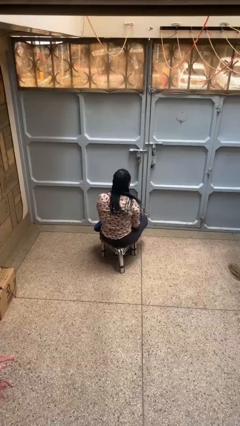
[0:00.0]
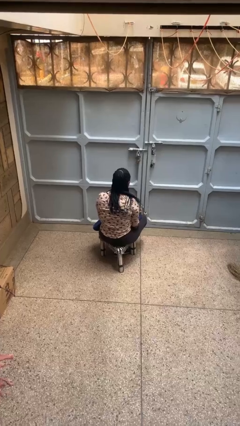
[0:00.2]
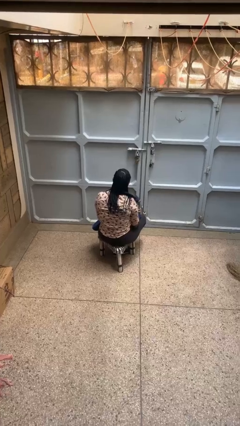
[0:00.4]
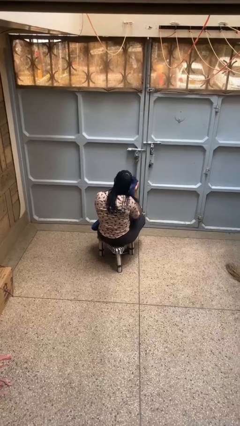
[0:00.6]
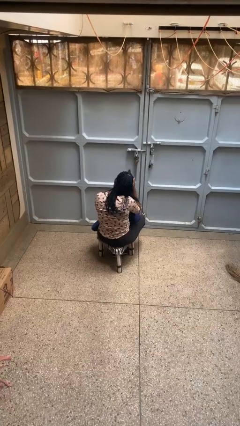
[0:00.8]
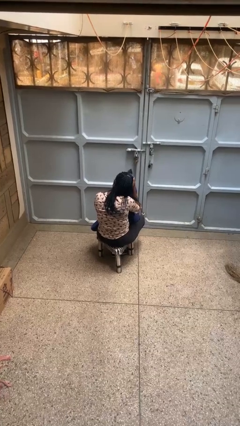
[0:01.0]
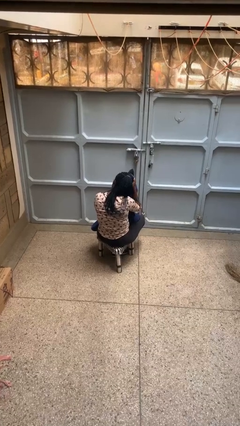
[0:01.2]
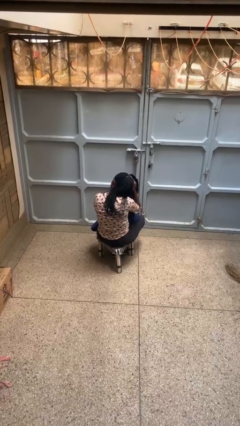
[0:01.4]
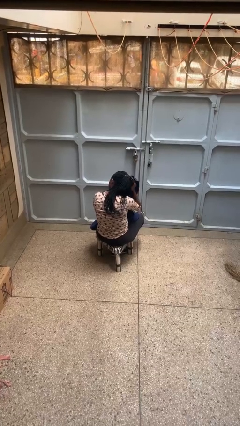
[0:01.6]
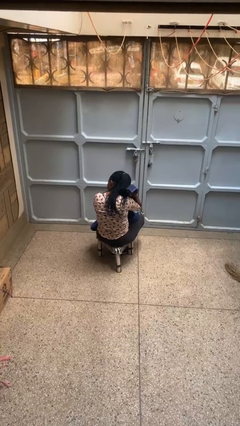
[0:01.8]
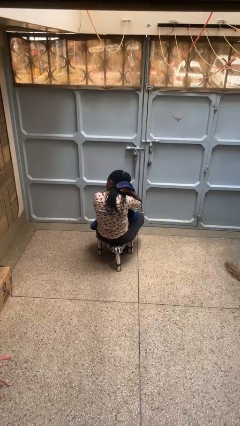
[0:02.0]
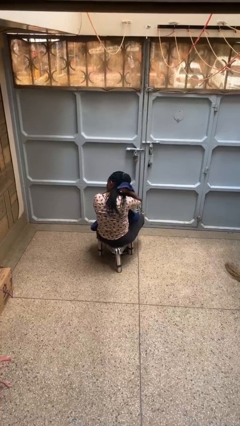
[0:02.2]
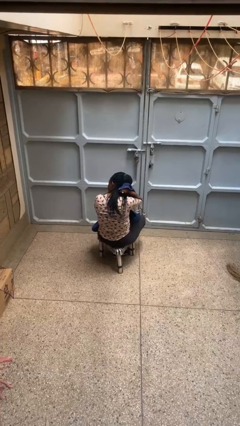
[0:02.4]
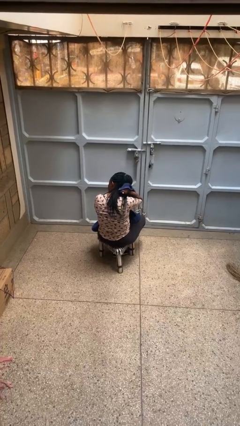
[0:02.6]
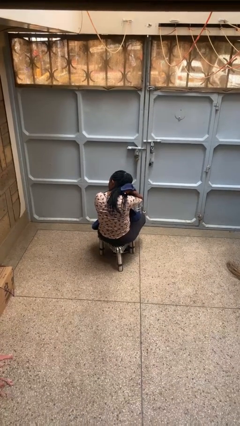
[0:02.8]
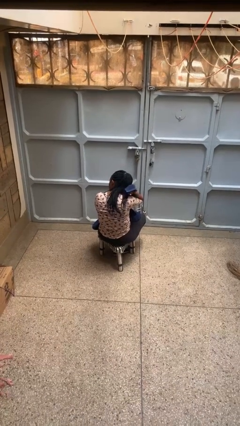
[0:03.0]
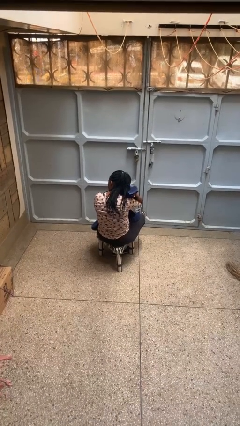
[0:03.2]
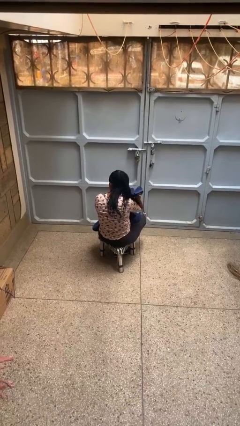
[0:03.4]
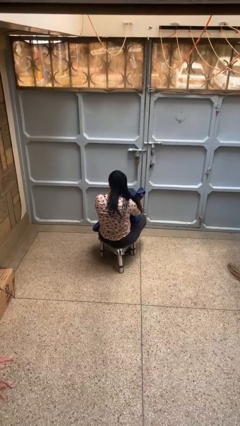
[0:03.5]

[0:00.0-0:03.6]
person dries hair with towel

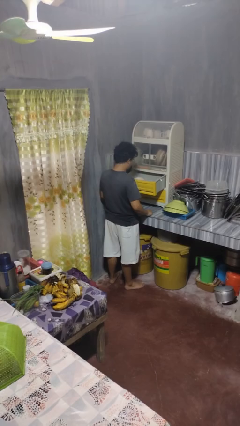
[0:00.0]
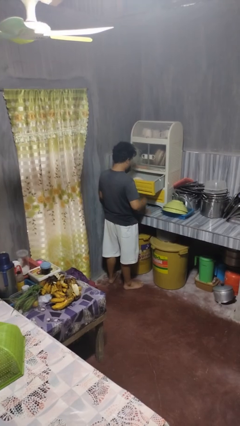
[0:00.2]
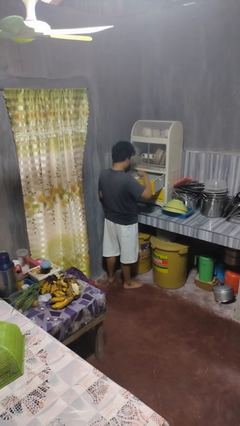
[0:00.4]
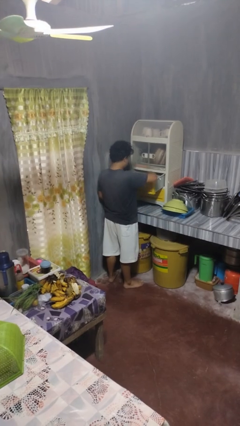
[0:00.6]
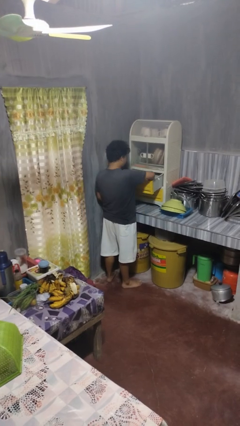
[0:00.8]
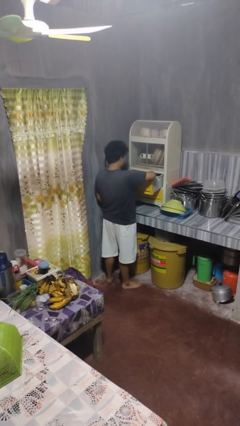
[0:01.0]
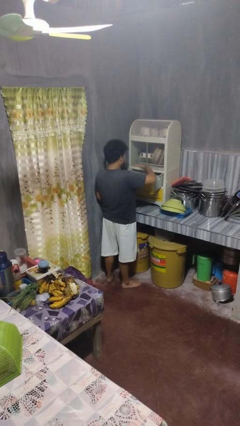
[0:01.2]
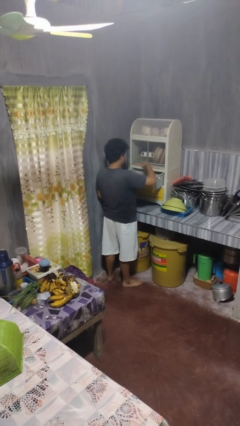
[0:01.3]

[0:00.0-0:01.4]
person takes object from kitchen drawer

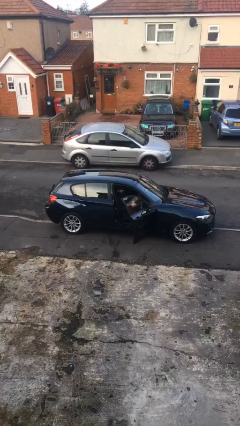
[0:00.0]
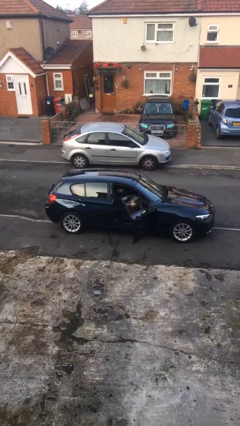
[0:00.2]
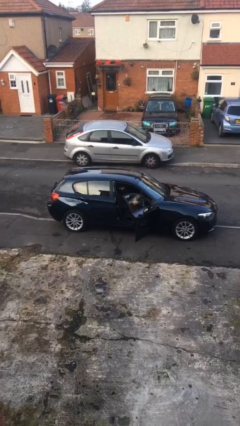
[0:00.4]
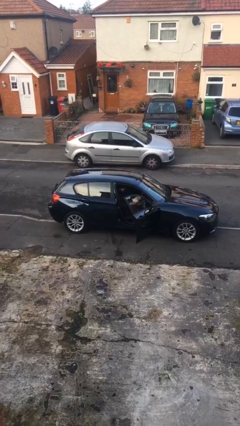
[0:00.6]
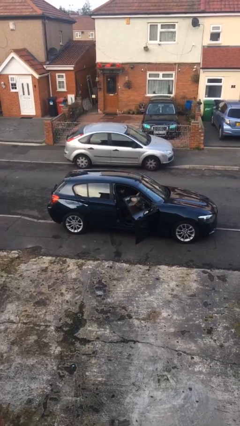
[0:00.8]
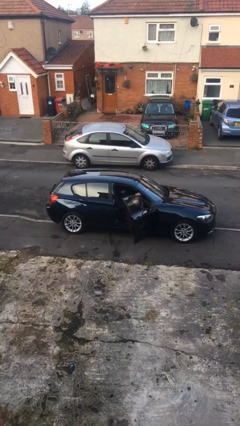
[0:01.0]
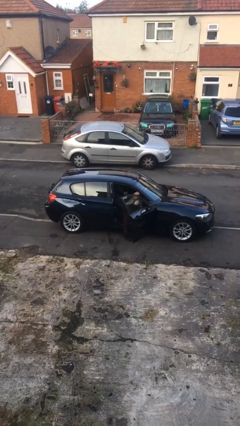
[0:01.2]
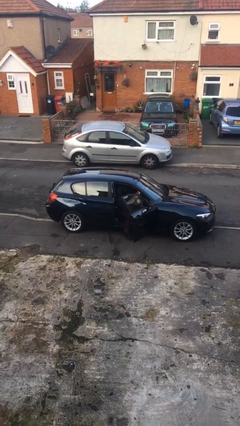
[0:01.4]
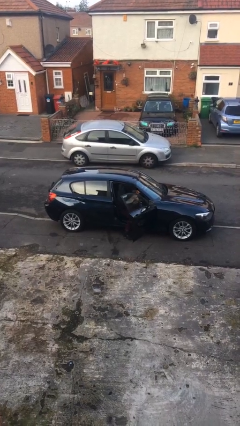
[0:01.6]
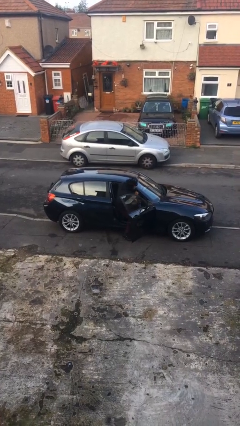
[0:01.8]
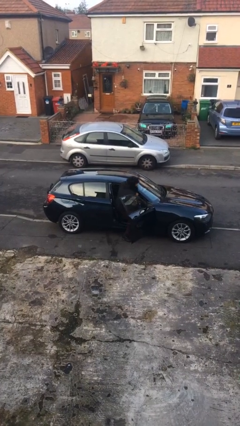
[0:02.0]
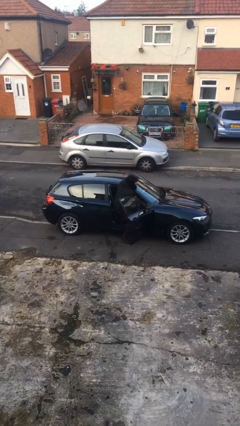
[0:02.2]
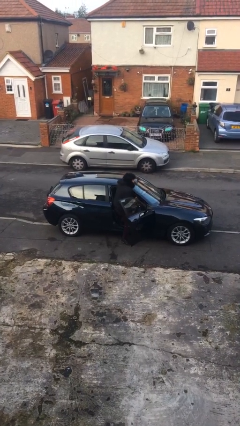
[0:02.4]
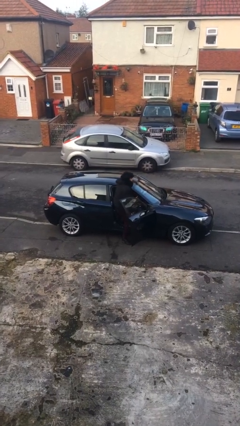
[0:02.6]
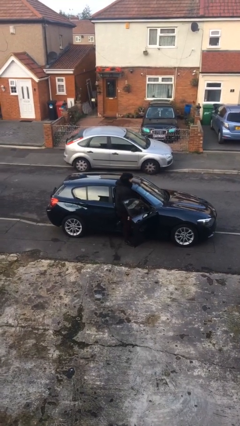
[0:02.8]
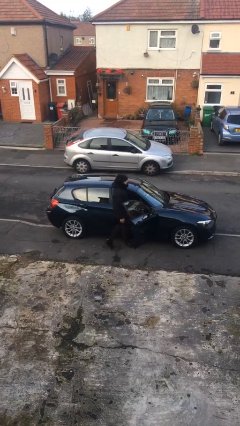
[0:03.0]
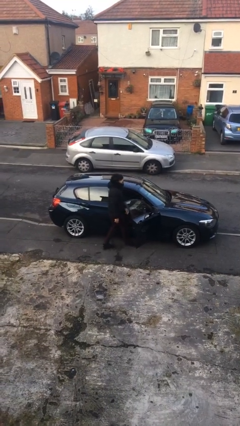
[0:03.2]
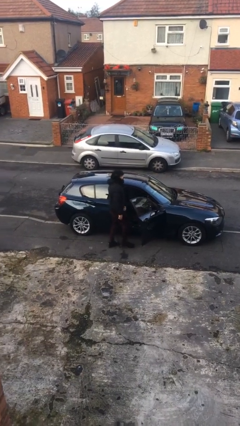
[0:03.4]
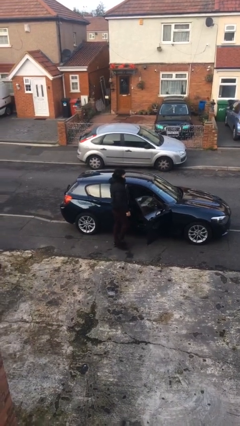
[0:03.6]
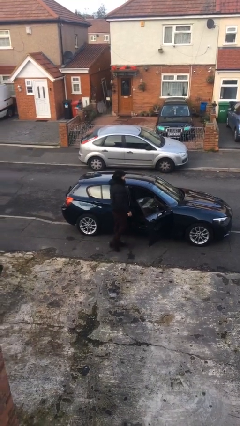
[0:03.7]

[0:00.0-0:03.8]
person exits car

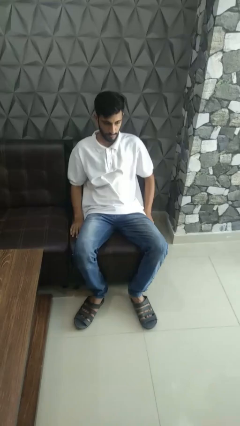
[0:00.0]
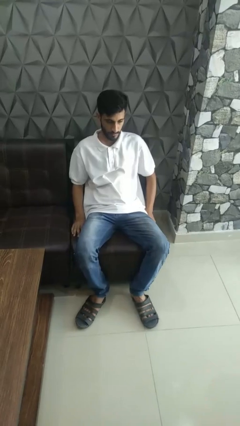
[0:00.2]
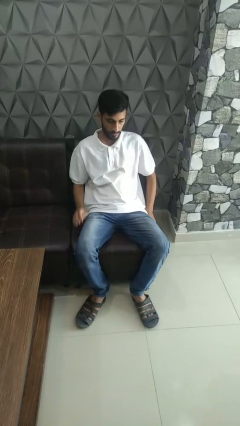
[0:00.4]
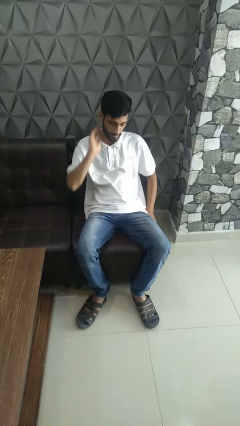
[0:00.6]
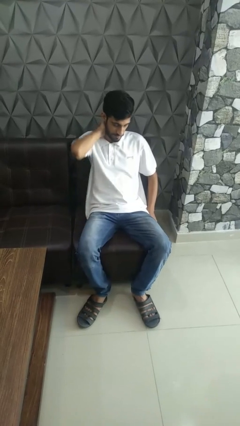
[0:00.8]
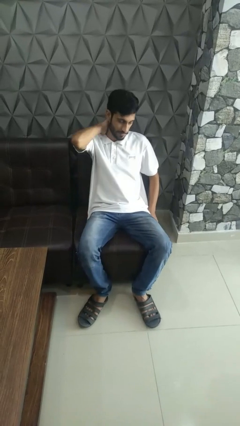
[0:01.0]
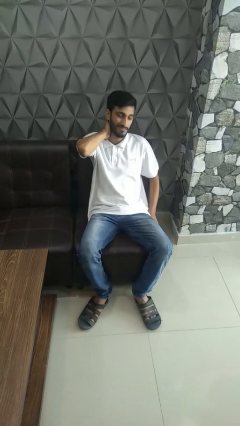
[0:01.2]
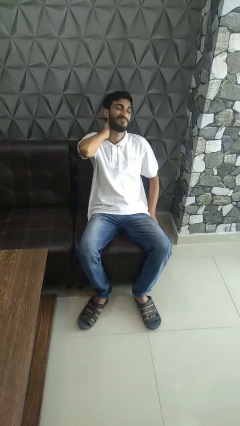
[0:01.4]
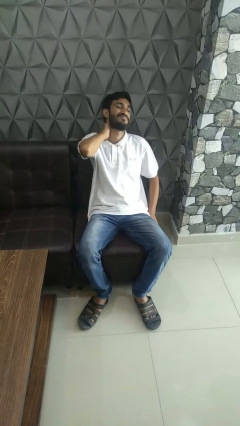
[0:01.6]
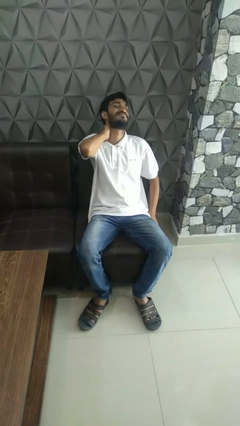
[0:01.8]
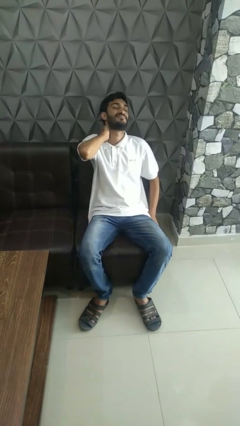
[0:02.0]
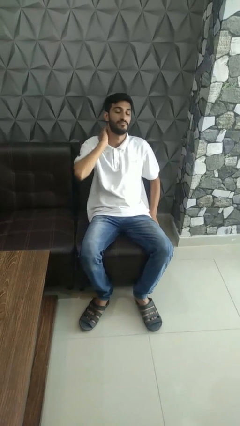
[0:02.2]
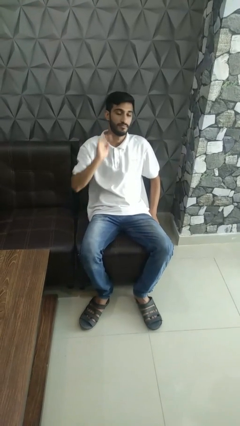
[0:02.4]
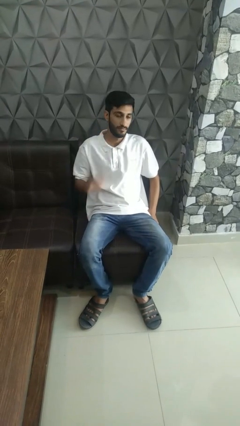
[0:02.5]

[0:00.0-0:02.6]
person rubs neck

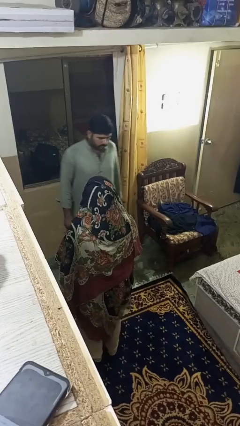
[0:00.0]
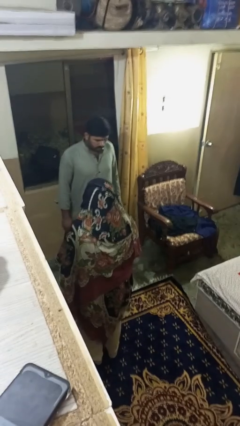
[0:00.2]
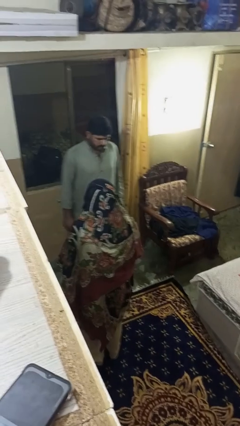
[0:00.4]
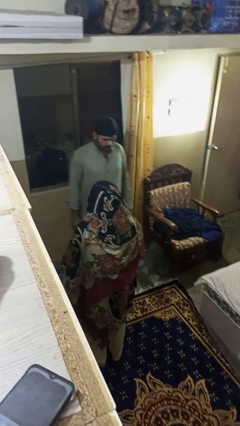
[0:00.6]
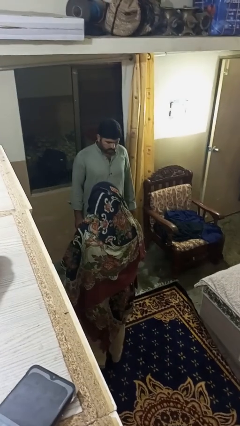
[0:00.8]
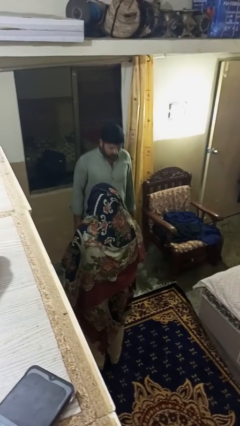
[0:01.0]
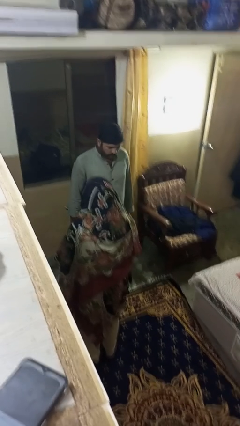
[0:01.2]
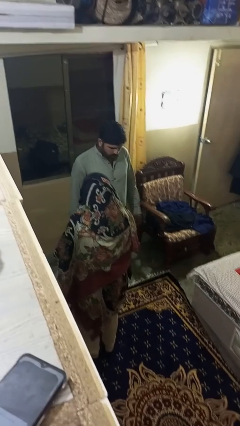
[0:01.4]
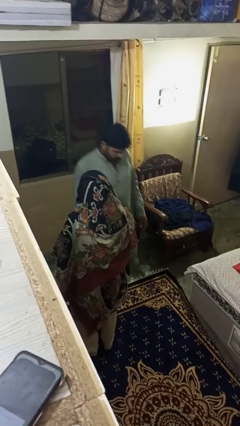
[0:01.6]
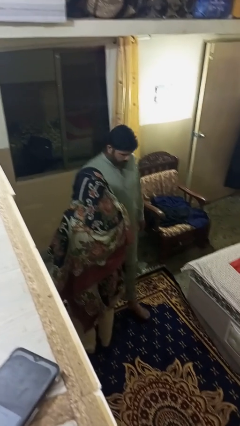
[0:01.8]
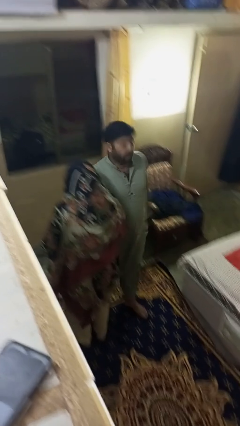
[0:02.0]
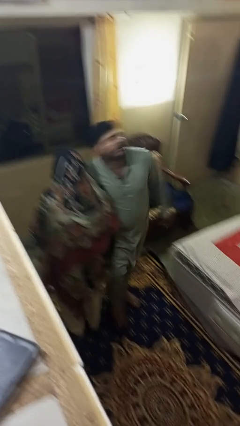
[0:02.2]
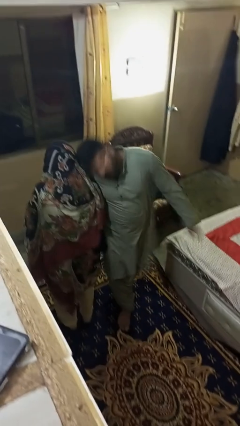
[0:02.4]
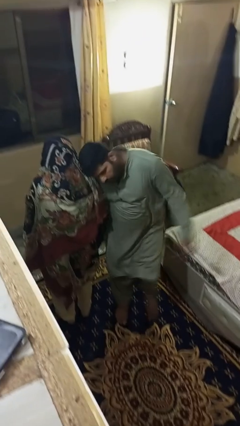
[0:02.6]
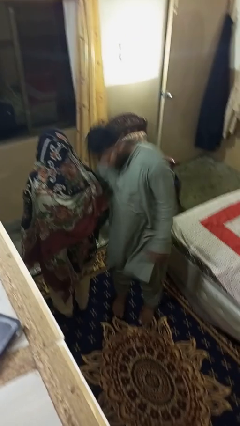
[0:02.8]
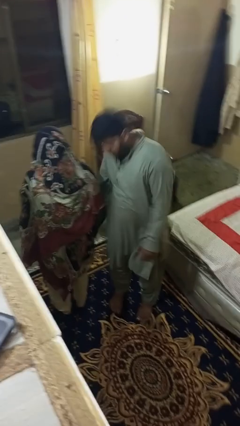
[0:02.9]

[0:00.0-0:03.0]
person bumps into person

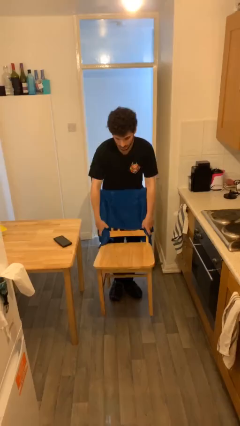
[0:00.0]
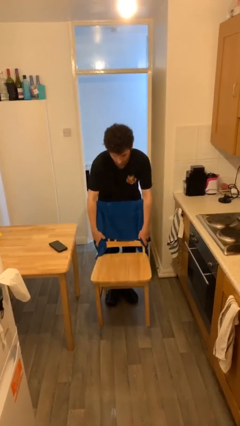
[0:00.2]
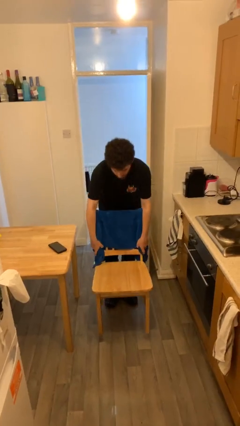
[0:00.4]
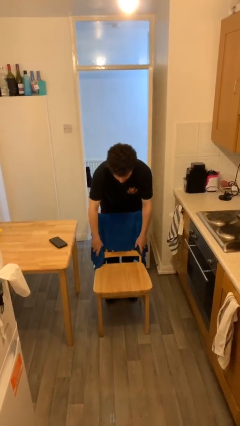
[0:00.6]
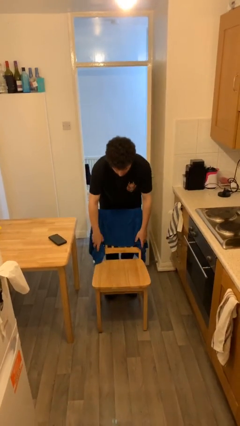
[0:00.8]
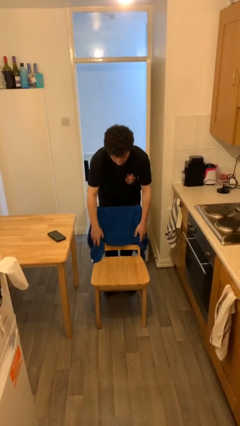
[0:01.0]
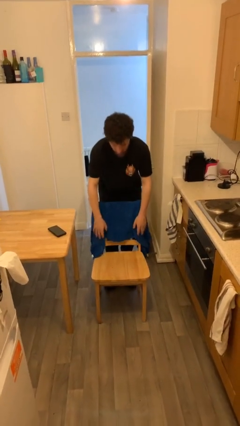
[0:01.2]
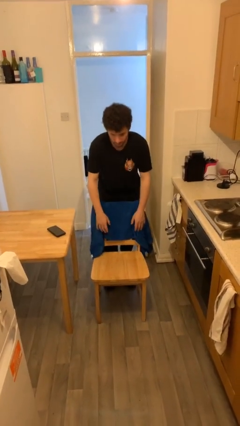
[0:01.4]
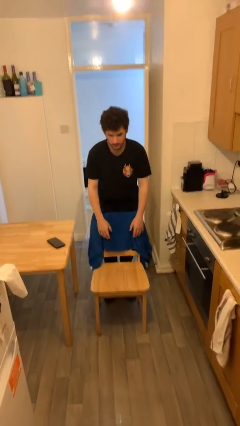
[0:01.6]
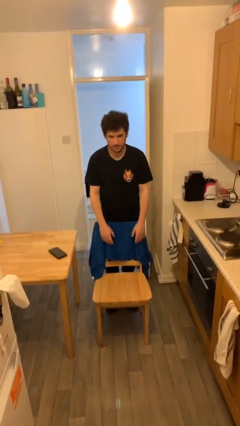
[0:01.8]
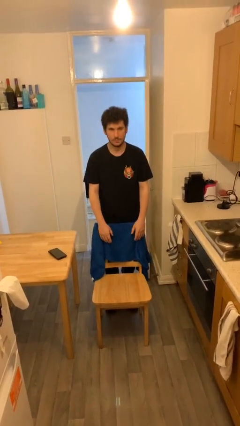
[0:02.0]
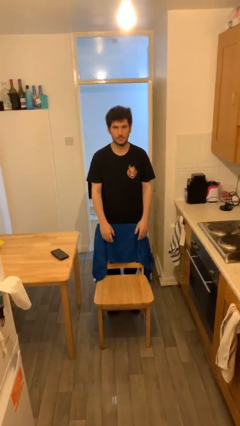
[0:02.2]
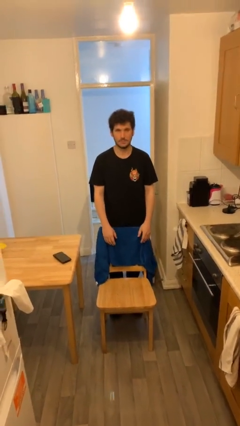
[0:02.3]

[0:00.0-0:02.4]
person puts down object on floor

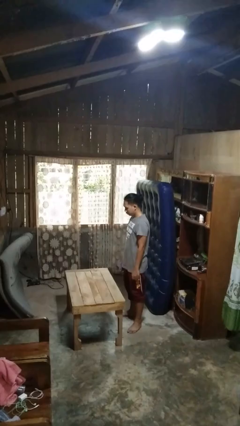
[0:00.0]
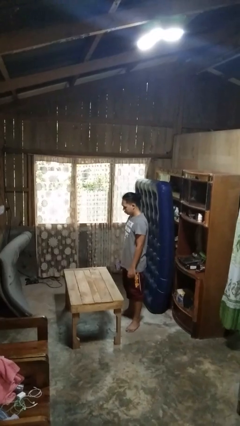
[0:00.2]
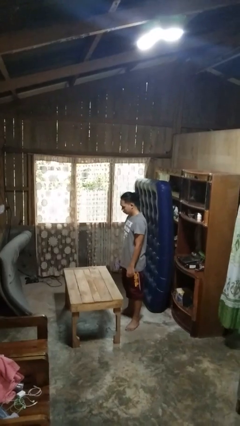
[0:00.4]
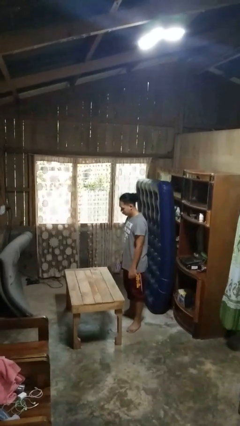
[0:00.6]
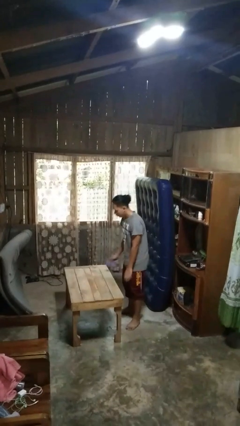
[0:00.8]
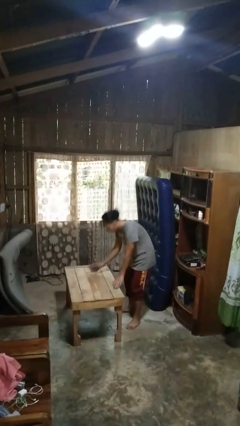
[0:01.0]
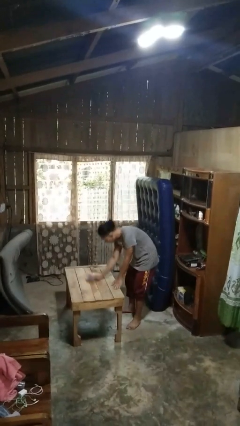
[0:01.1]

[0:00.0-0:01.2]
person cleans table with rag
